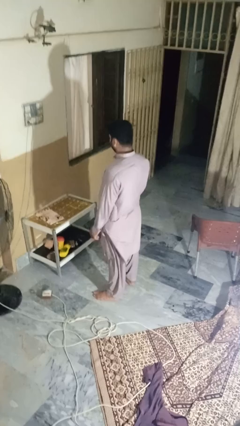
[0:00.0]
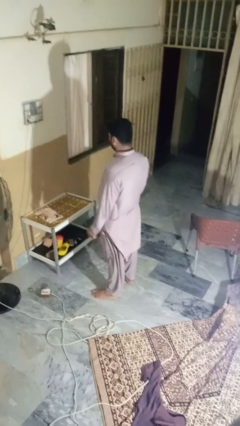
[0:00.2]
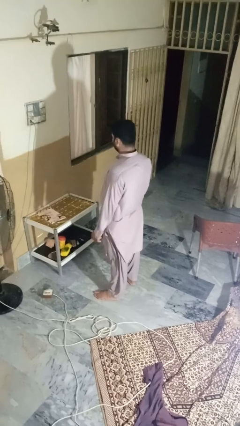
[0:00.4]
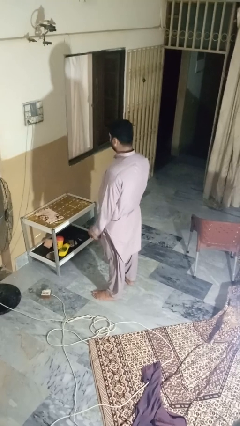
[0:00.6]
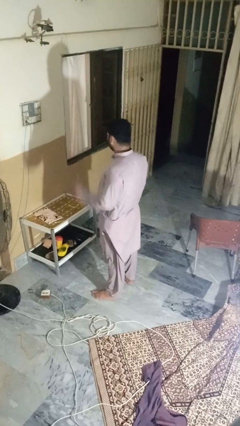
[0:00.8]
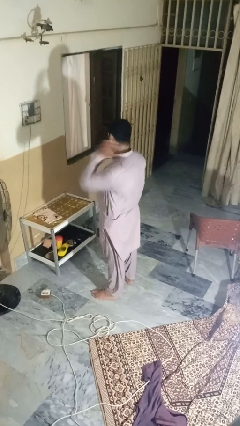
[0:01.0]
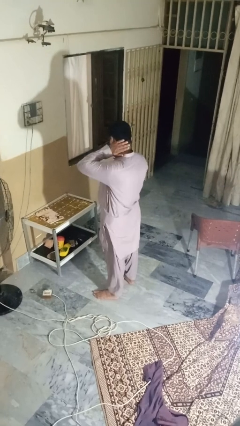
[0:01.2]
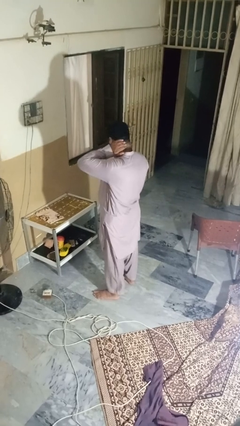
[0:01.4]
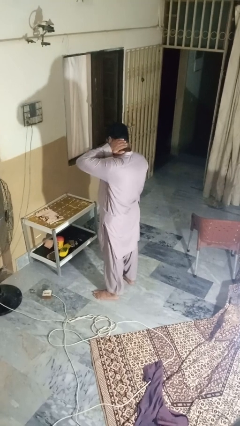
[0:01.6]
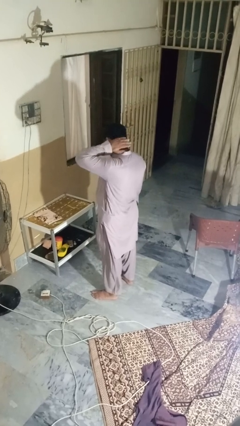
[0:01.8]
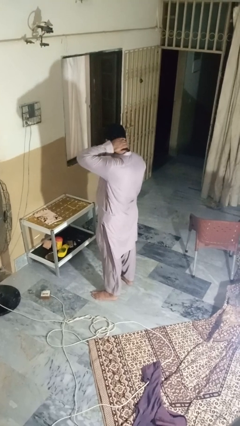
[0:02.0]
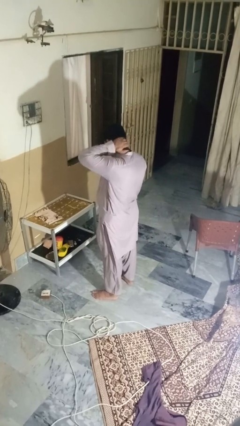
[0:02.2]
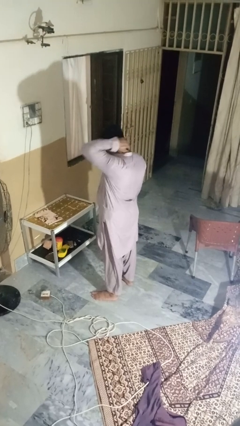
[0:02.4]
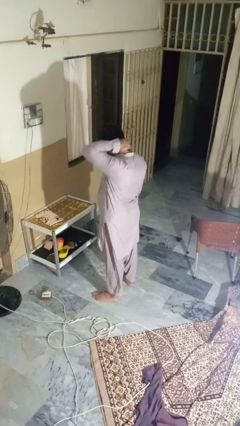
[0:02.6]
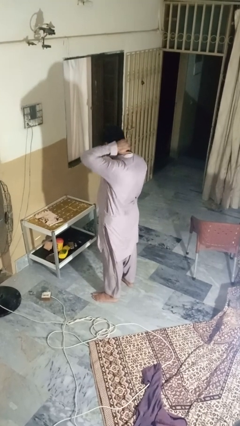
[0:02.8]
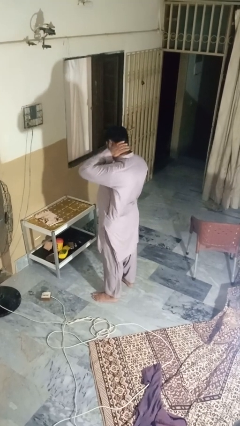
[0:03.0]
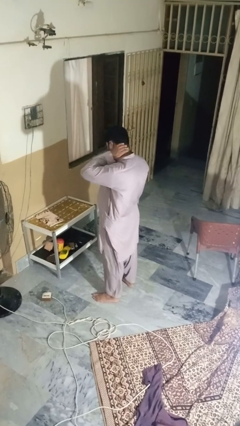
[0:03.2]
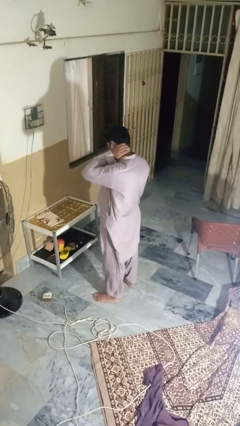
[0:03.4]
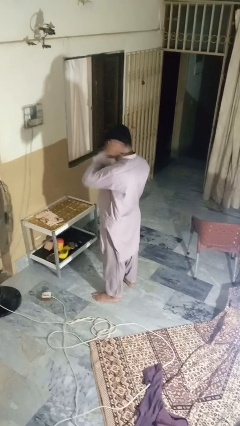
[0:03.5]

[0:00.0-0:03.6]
person rubs neck

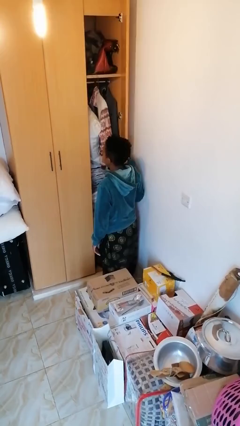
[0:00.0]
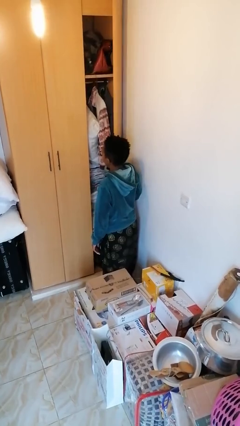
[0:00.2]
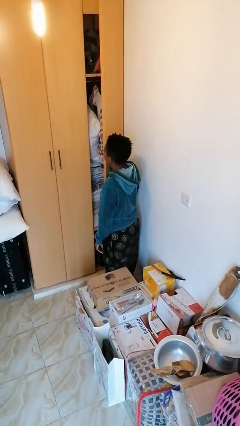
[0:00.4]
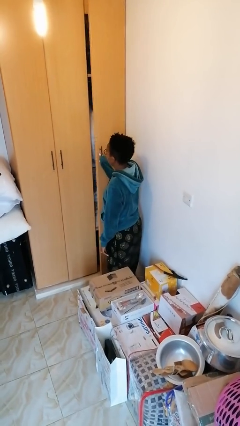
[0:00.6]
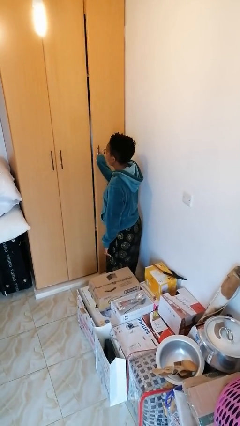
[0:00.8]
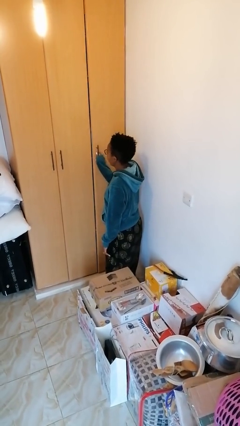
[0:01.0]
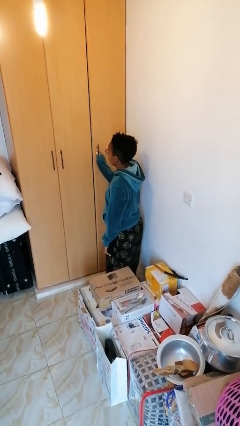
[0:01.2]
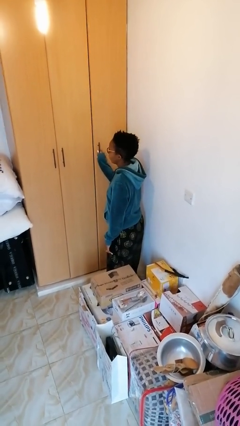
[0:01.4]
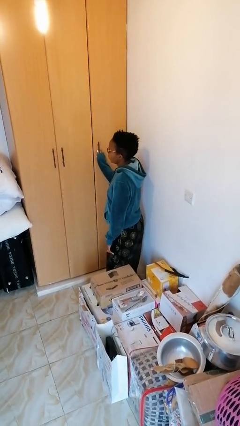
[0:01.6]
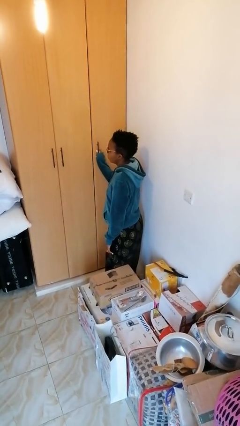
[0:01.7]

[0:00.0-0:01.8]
person closes closet door

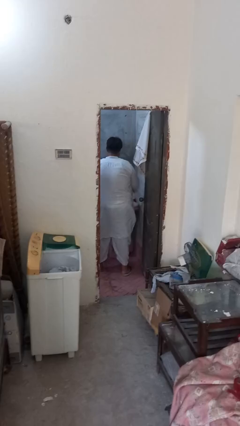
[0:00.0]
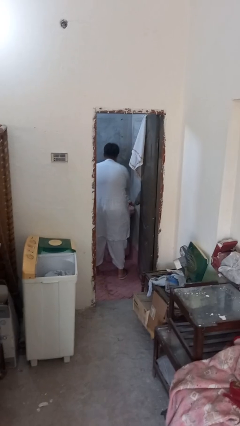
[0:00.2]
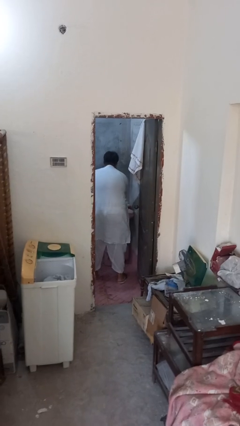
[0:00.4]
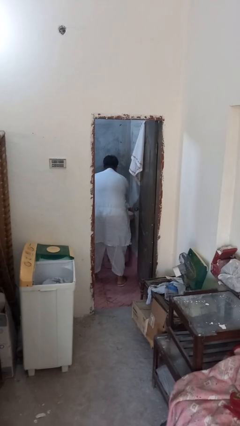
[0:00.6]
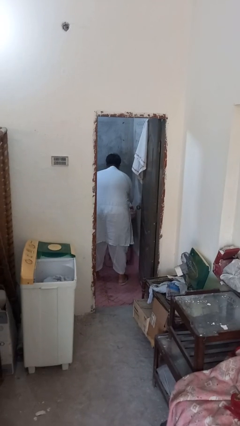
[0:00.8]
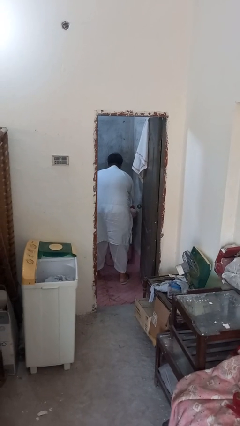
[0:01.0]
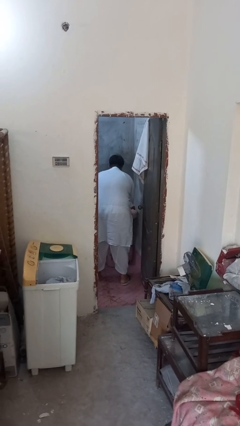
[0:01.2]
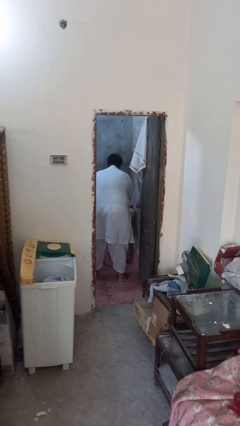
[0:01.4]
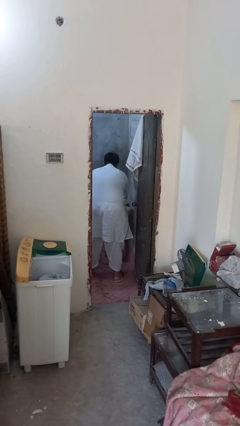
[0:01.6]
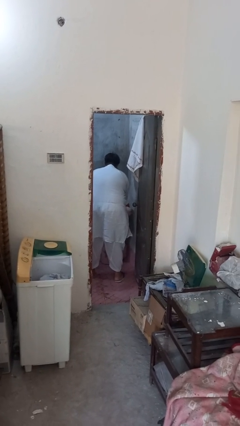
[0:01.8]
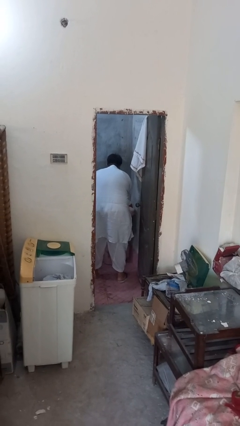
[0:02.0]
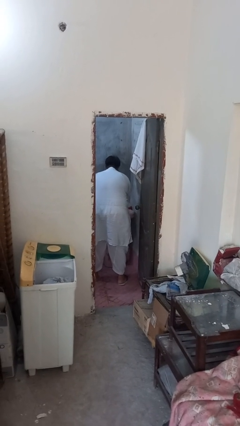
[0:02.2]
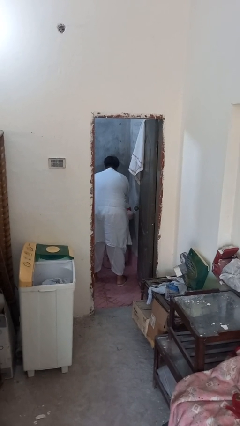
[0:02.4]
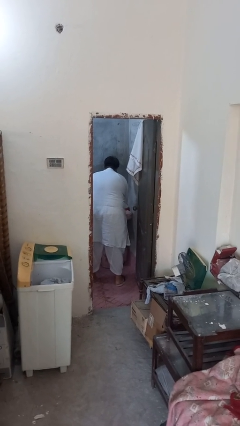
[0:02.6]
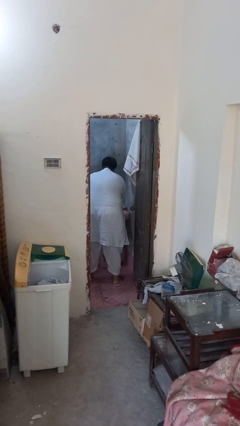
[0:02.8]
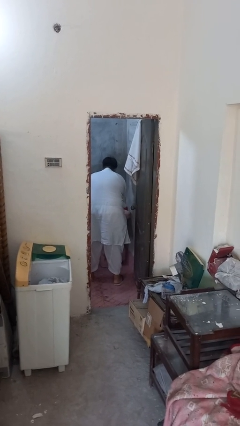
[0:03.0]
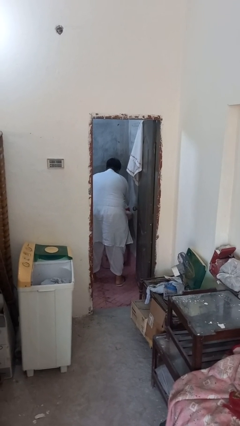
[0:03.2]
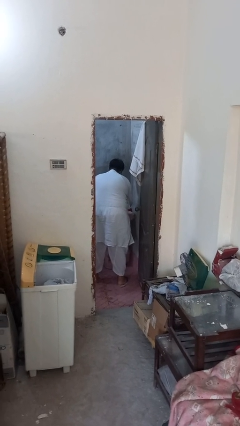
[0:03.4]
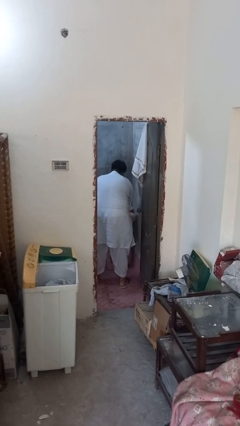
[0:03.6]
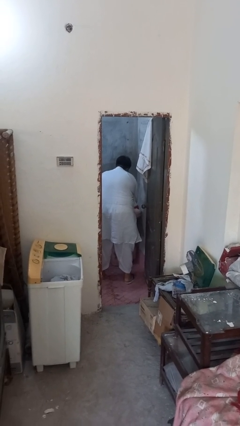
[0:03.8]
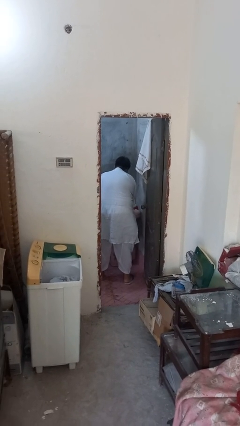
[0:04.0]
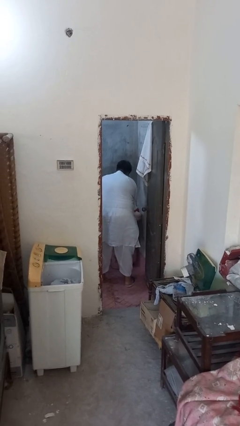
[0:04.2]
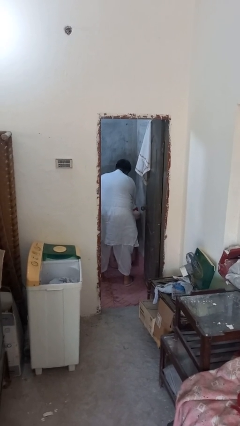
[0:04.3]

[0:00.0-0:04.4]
person washes hands

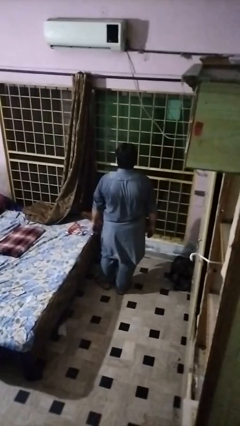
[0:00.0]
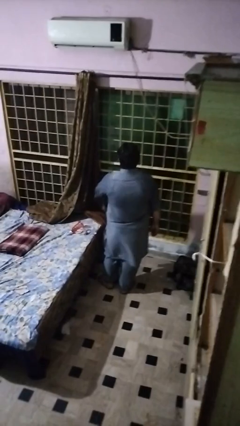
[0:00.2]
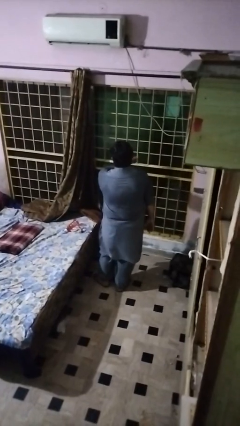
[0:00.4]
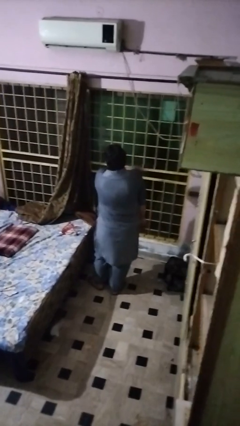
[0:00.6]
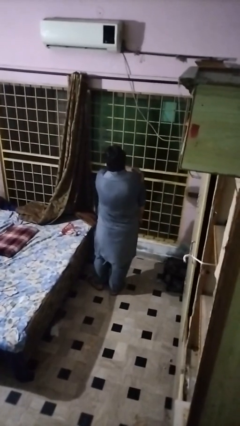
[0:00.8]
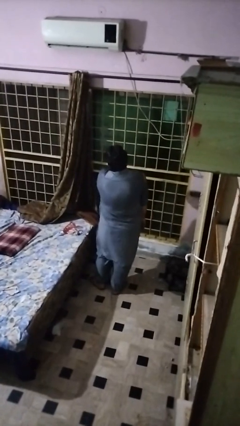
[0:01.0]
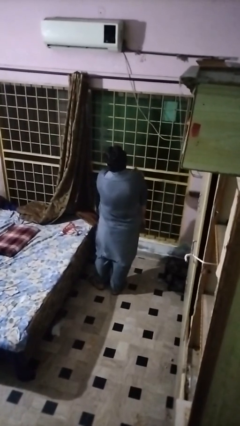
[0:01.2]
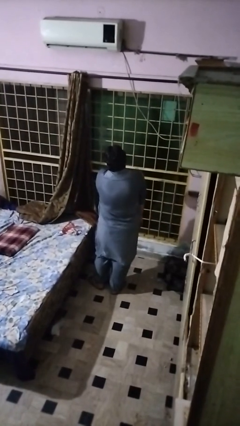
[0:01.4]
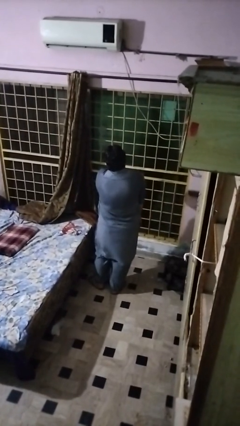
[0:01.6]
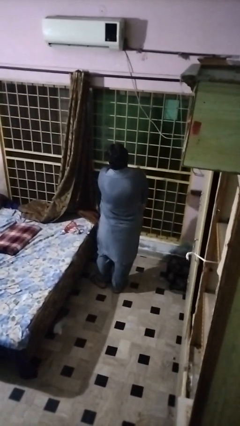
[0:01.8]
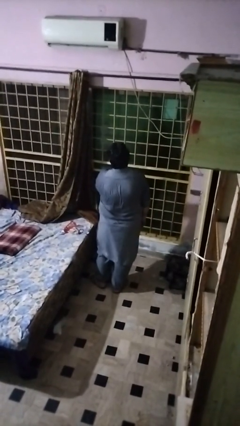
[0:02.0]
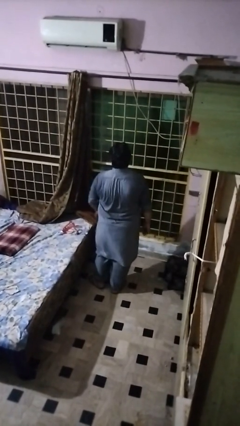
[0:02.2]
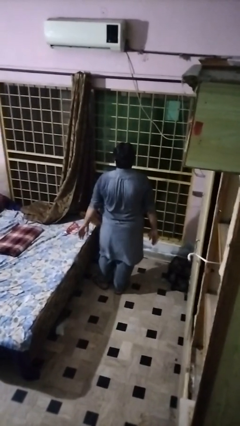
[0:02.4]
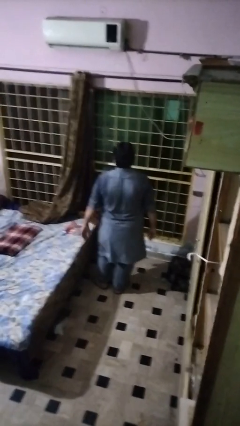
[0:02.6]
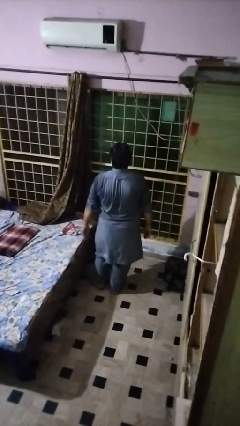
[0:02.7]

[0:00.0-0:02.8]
person swats bug

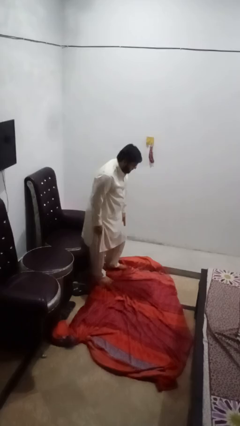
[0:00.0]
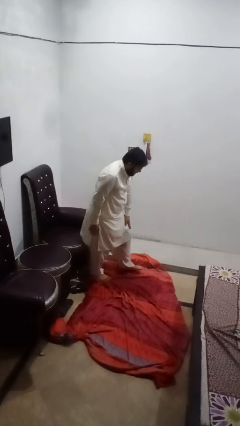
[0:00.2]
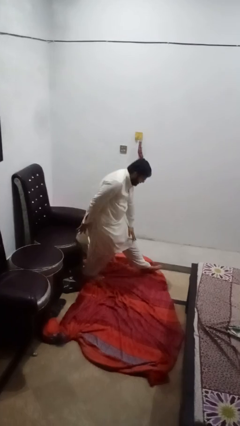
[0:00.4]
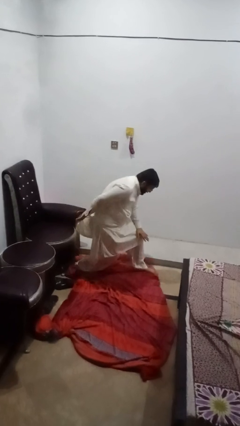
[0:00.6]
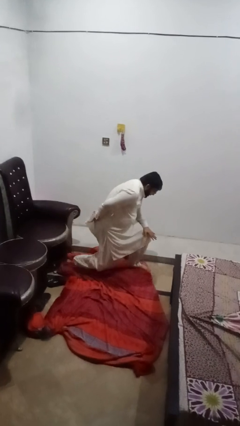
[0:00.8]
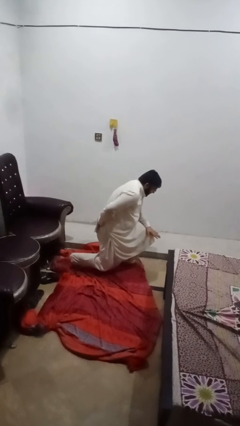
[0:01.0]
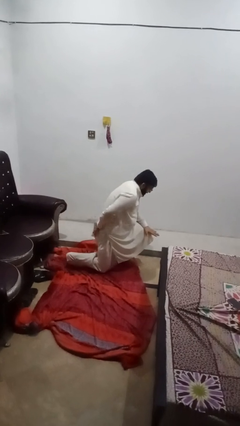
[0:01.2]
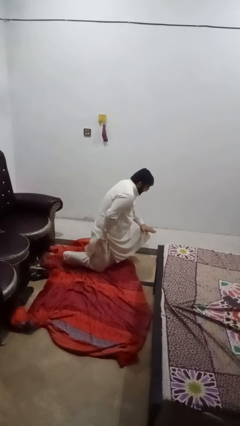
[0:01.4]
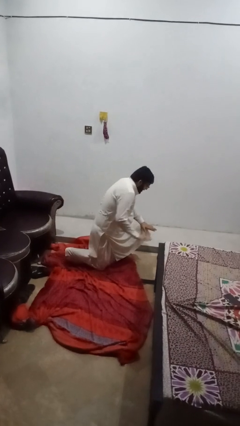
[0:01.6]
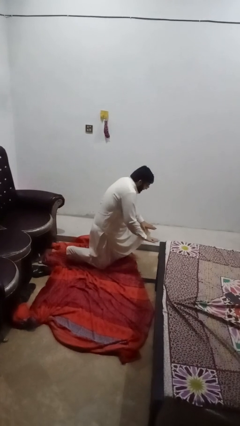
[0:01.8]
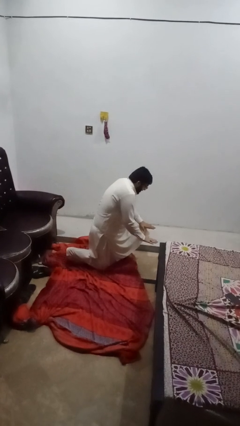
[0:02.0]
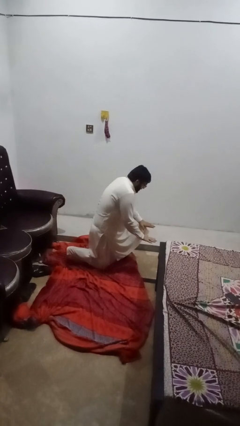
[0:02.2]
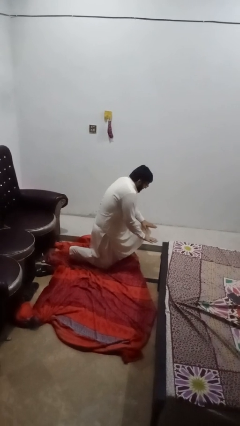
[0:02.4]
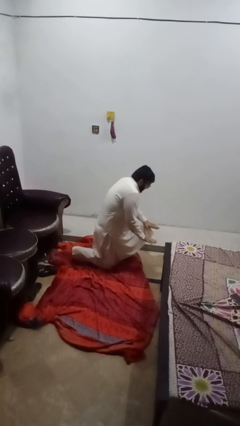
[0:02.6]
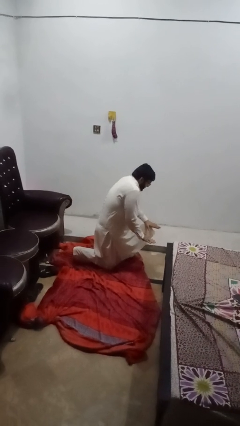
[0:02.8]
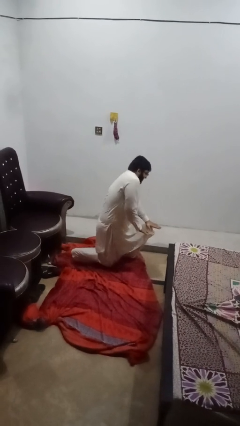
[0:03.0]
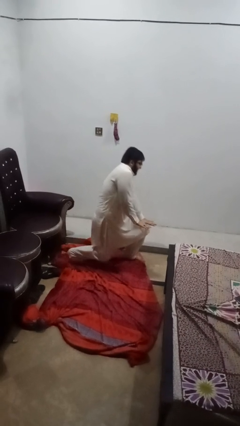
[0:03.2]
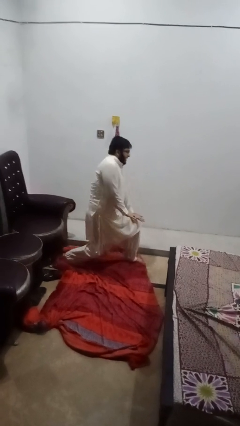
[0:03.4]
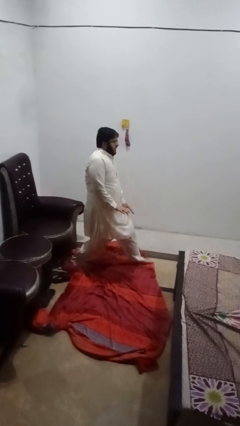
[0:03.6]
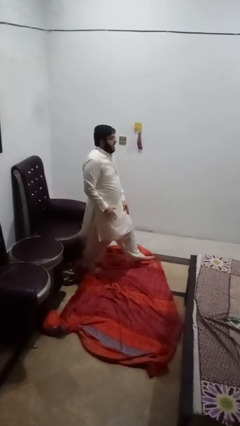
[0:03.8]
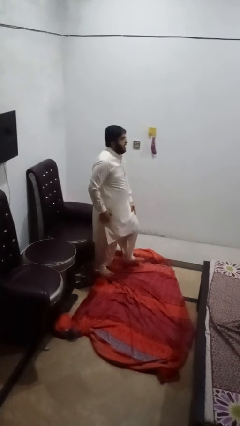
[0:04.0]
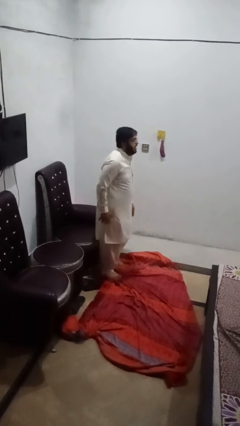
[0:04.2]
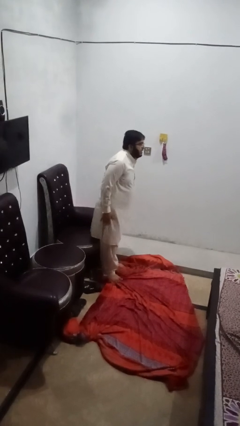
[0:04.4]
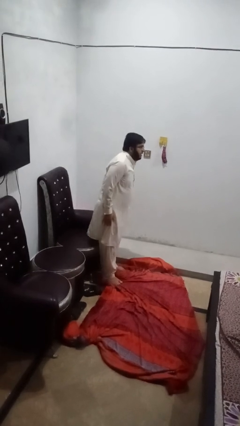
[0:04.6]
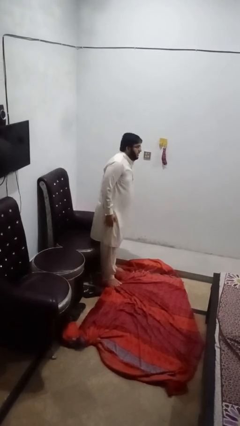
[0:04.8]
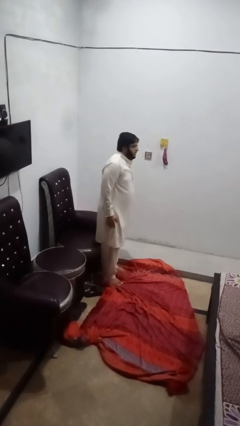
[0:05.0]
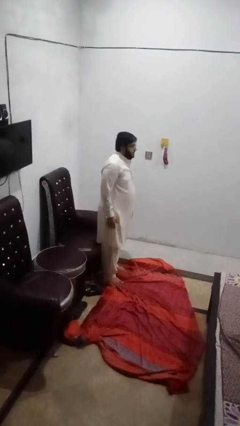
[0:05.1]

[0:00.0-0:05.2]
person exercises with lunges
